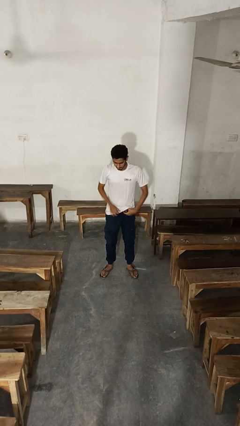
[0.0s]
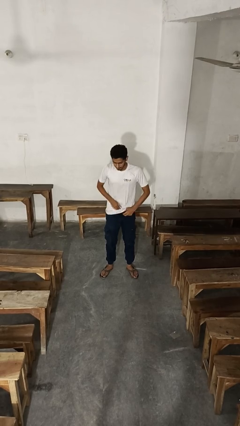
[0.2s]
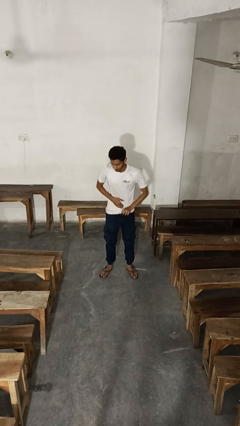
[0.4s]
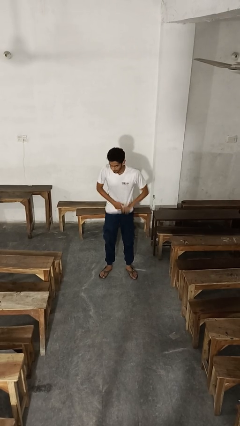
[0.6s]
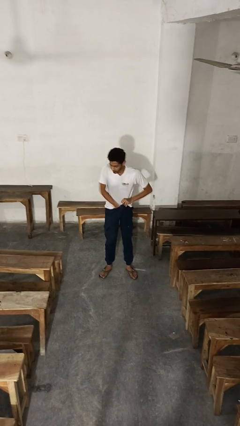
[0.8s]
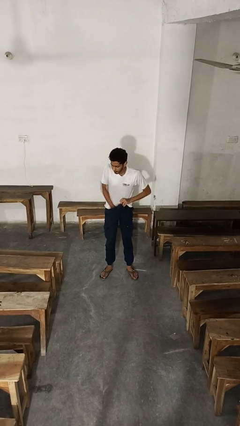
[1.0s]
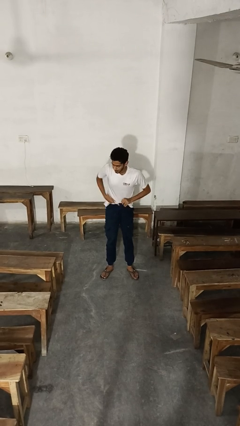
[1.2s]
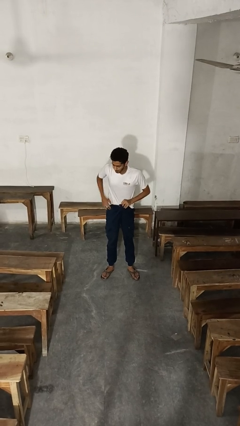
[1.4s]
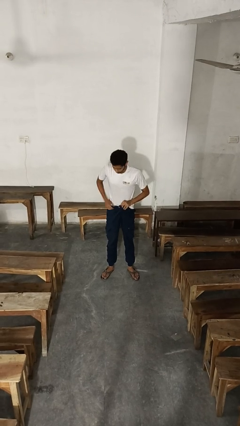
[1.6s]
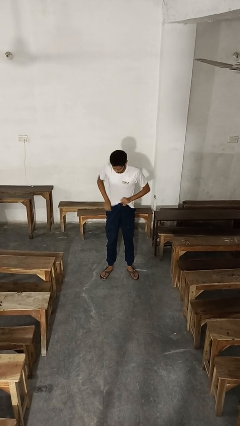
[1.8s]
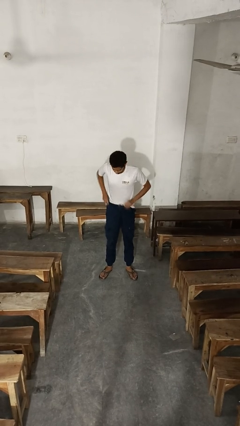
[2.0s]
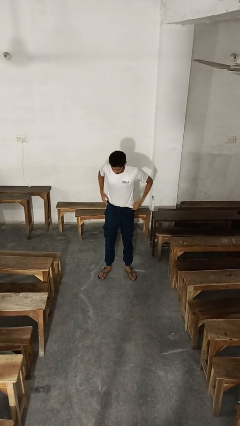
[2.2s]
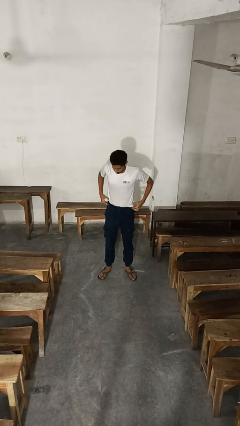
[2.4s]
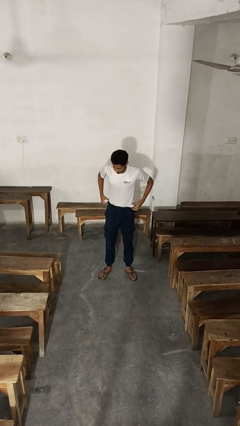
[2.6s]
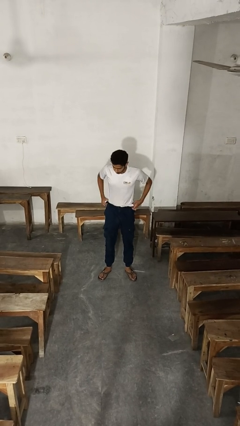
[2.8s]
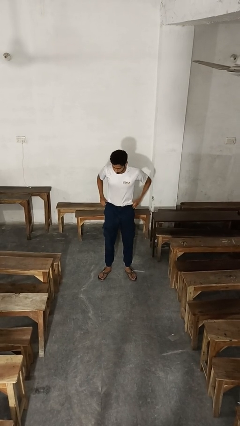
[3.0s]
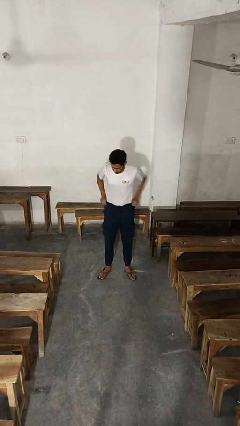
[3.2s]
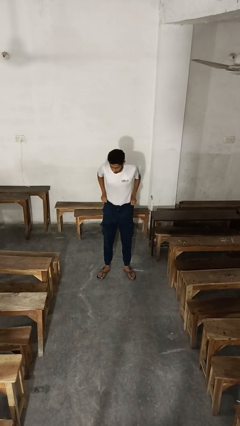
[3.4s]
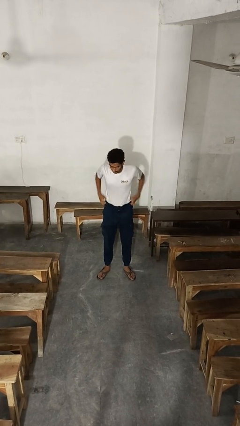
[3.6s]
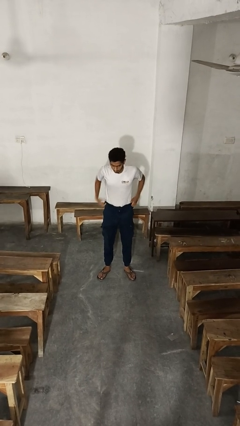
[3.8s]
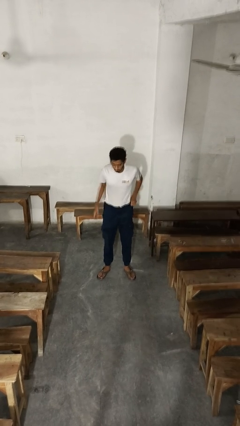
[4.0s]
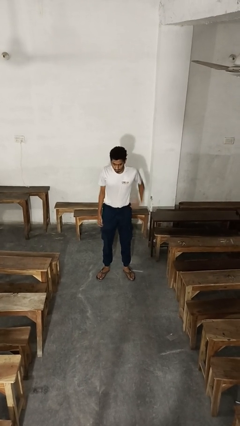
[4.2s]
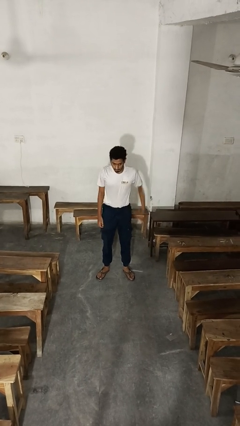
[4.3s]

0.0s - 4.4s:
person tucks in shirt

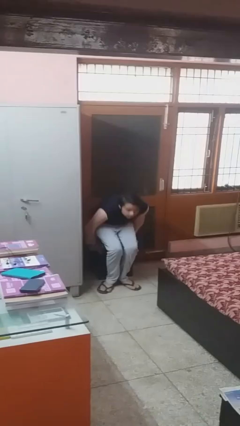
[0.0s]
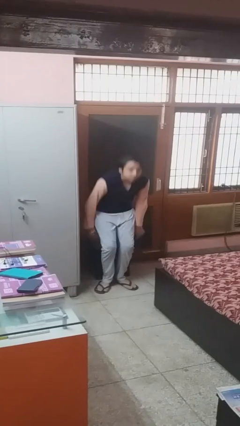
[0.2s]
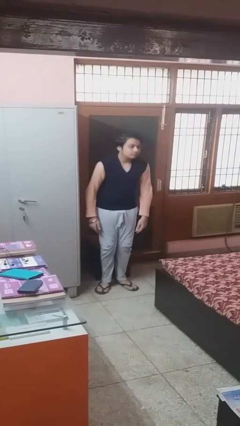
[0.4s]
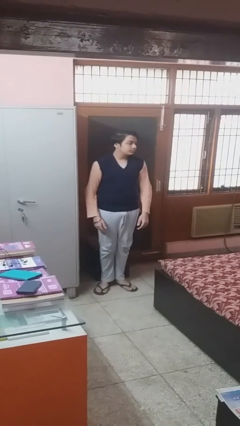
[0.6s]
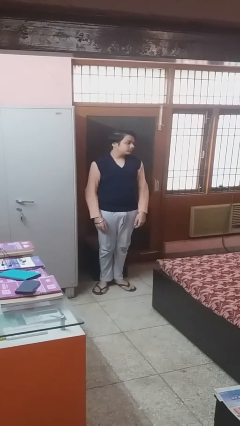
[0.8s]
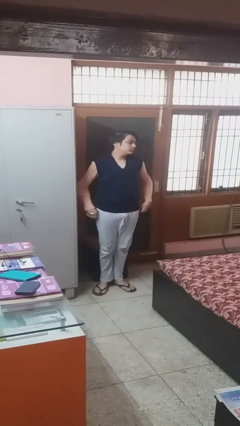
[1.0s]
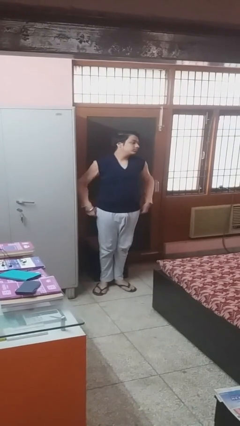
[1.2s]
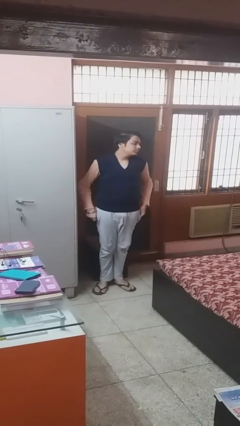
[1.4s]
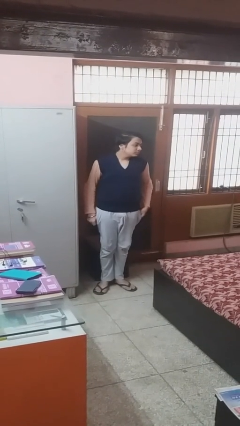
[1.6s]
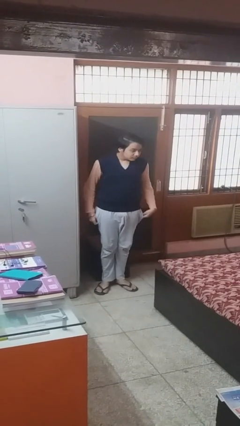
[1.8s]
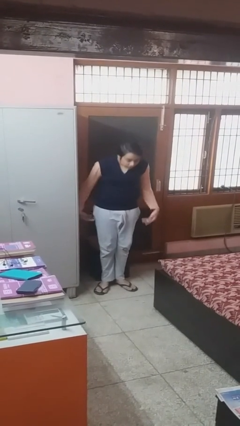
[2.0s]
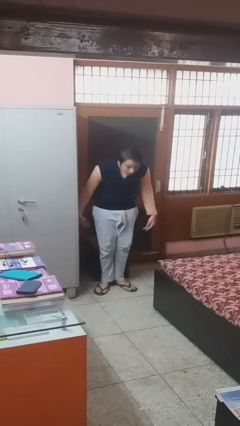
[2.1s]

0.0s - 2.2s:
person stands up

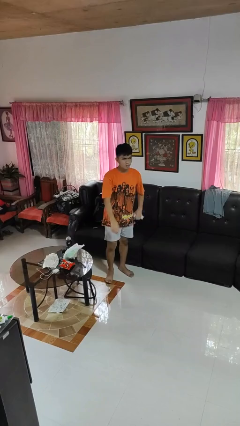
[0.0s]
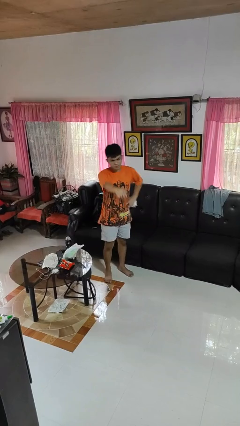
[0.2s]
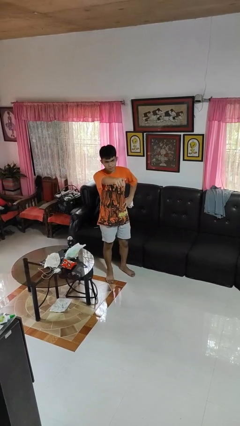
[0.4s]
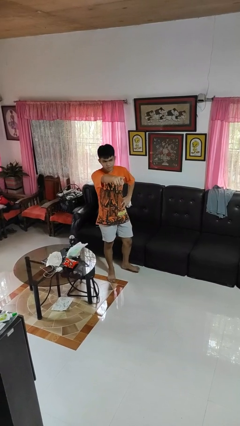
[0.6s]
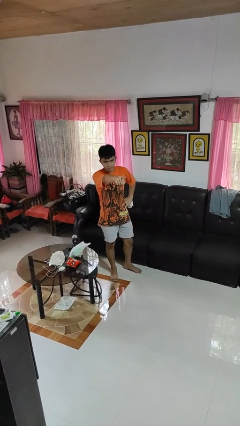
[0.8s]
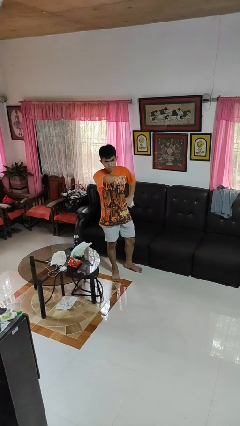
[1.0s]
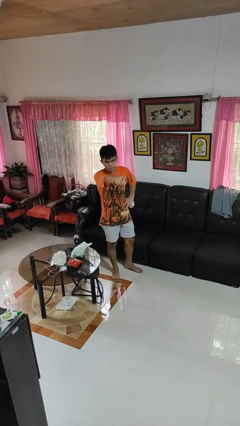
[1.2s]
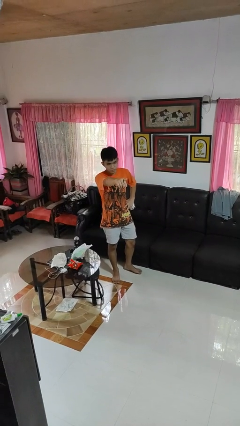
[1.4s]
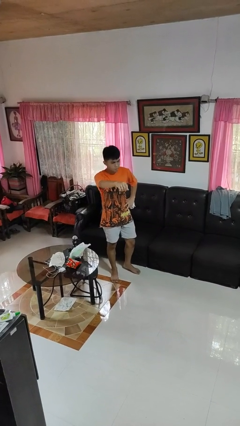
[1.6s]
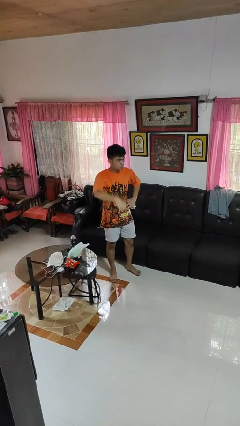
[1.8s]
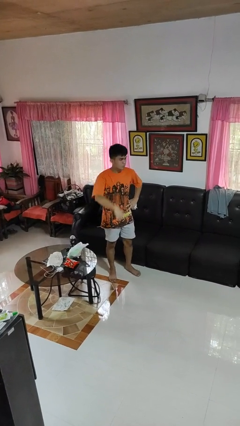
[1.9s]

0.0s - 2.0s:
person points at person

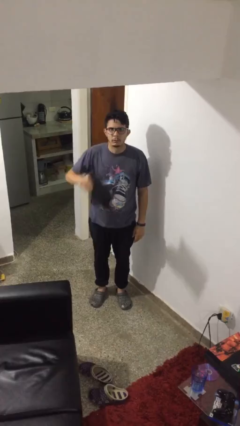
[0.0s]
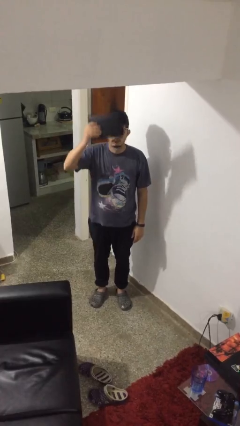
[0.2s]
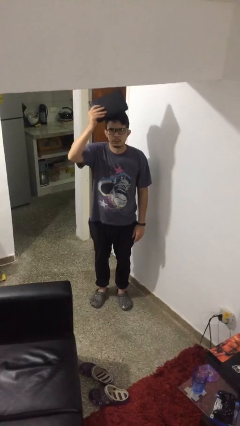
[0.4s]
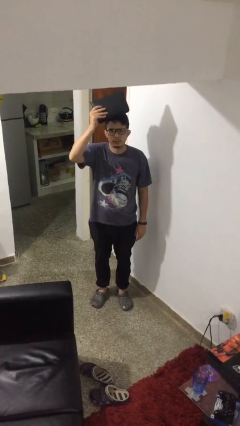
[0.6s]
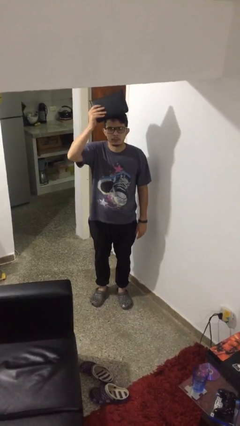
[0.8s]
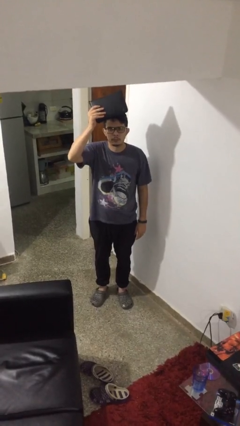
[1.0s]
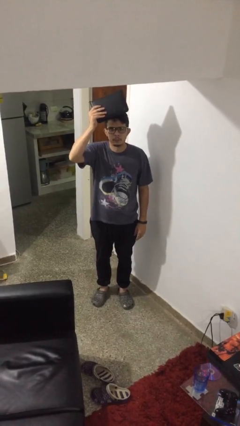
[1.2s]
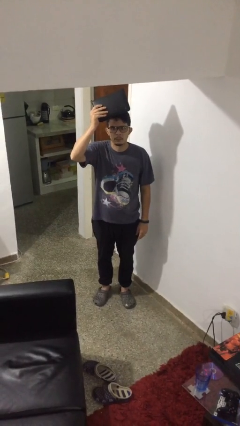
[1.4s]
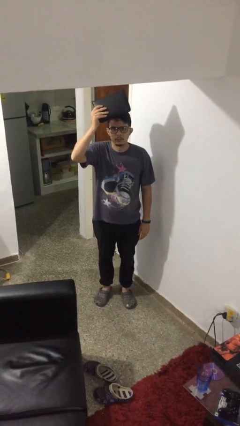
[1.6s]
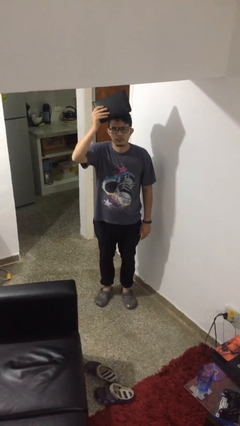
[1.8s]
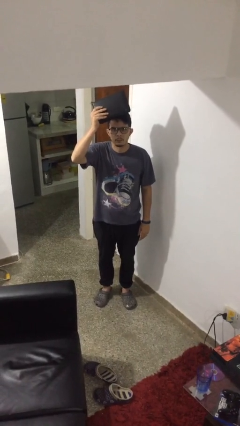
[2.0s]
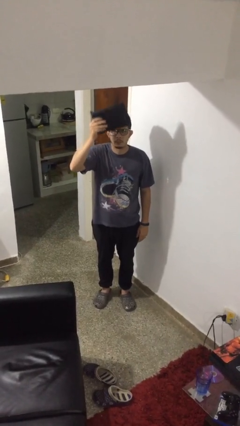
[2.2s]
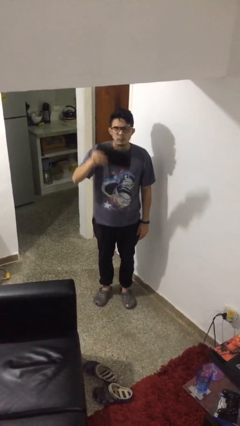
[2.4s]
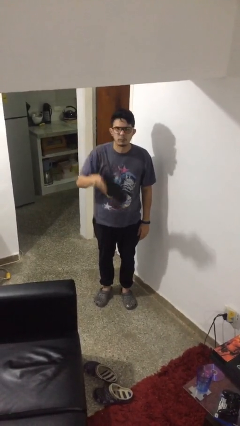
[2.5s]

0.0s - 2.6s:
person holds object above head

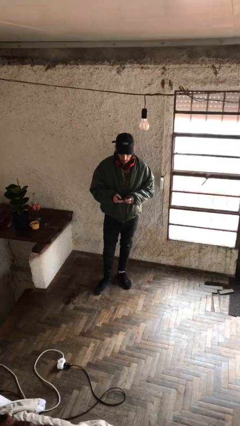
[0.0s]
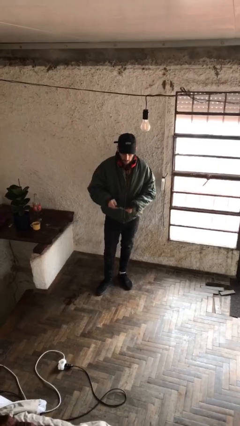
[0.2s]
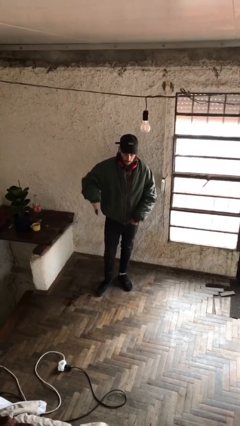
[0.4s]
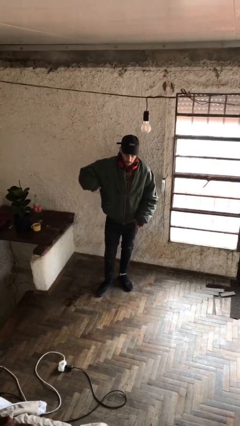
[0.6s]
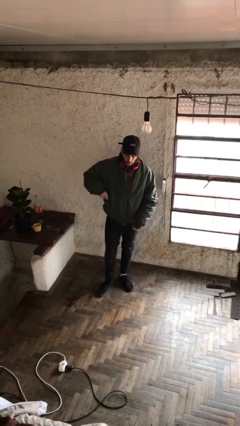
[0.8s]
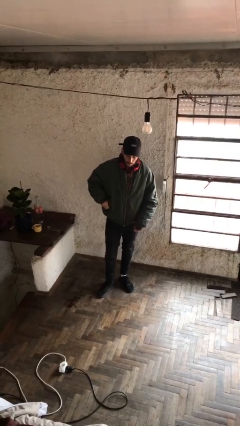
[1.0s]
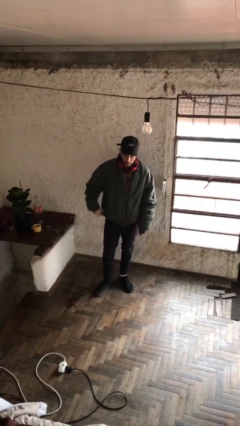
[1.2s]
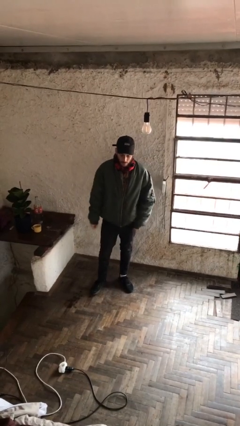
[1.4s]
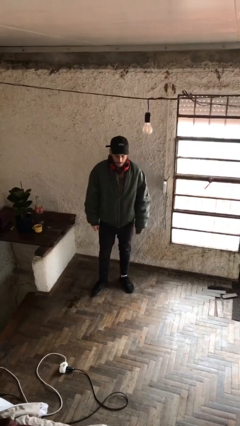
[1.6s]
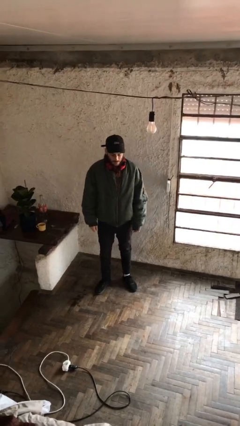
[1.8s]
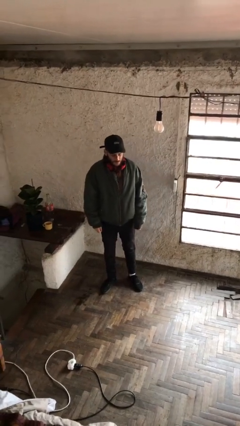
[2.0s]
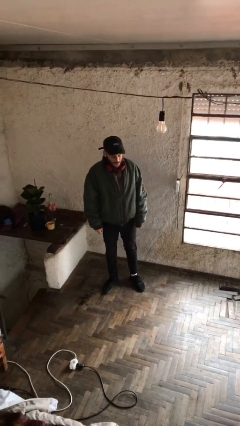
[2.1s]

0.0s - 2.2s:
person puts phone into pocket

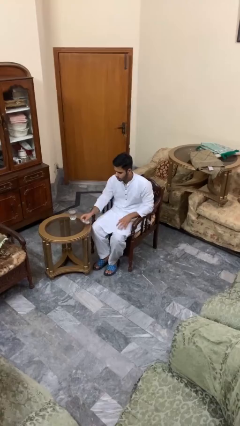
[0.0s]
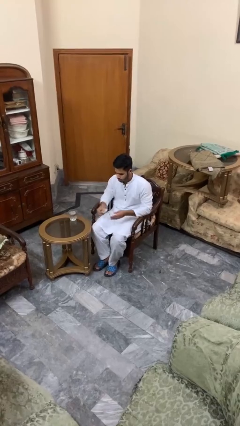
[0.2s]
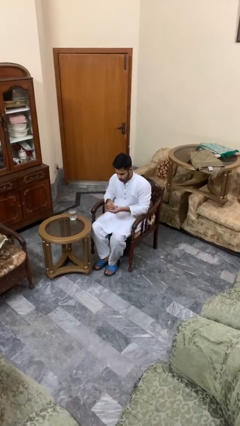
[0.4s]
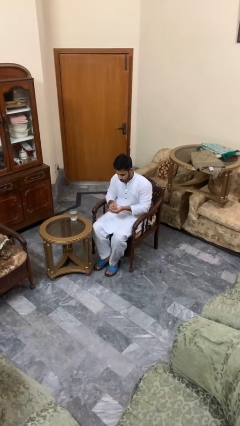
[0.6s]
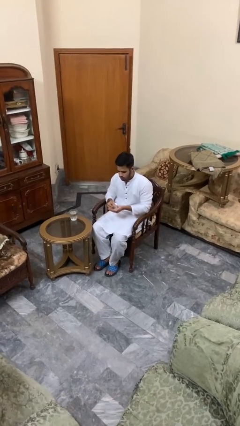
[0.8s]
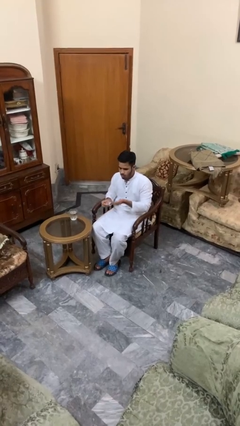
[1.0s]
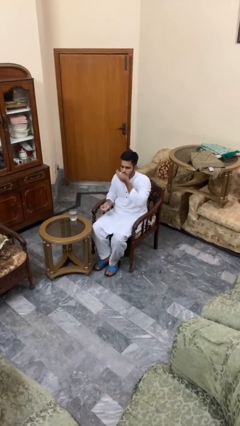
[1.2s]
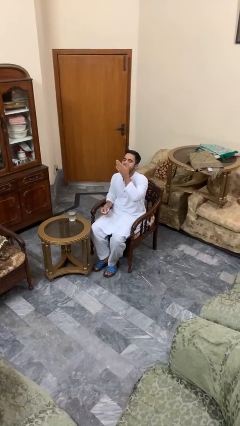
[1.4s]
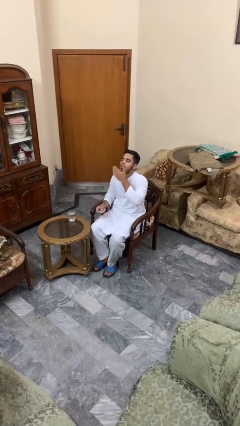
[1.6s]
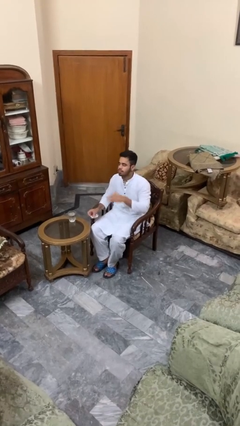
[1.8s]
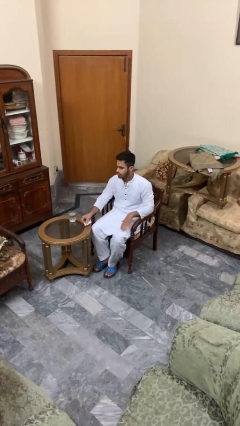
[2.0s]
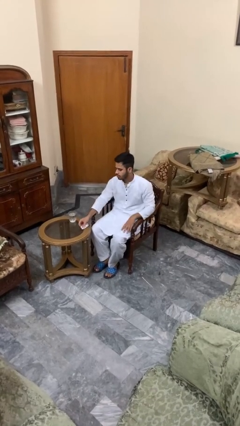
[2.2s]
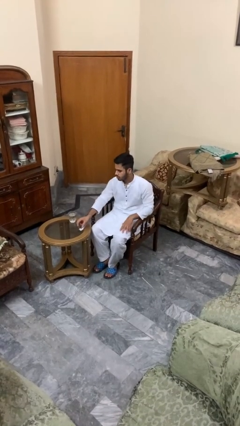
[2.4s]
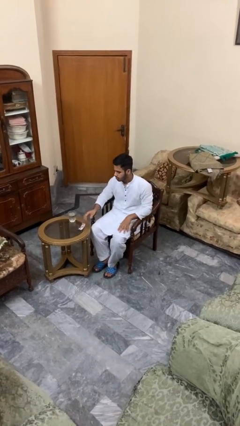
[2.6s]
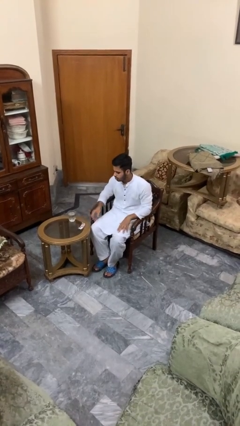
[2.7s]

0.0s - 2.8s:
person takes medicine pills

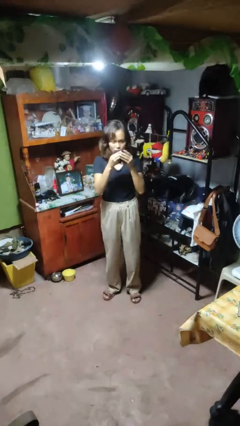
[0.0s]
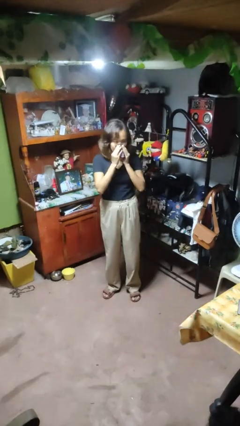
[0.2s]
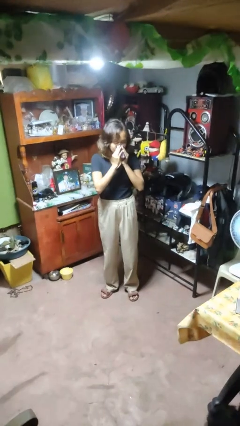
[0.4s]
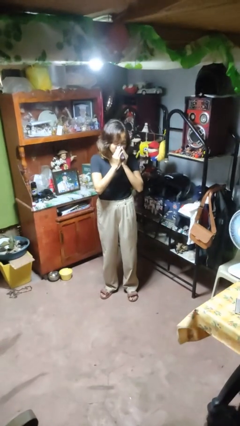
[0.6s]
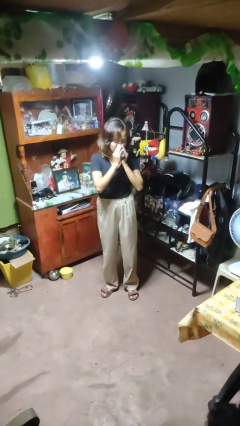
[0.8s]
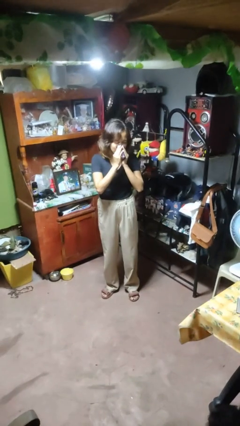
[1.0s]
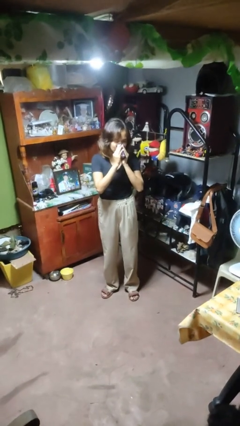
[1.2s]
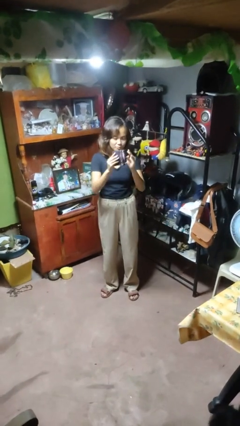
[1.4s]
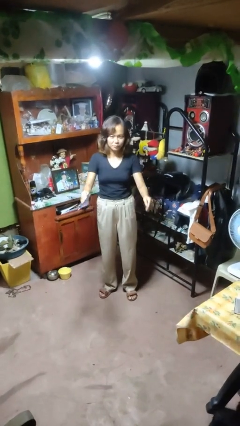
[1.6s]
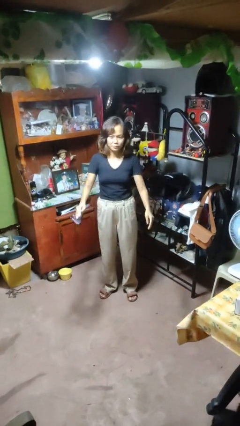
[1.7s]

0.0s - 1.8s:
person blows nose
